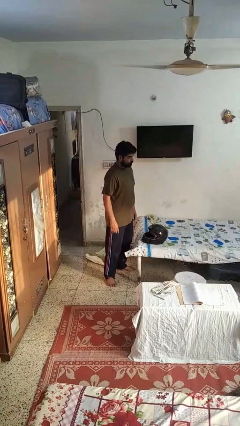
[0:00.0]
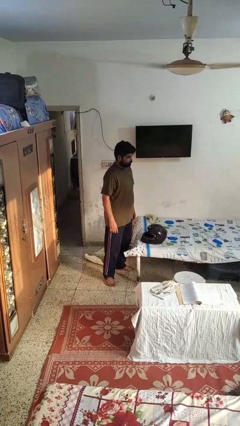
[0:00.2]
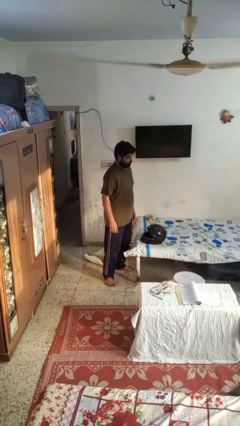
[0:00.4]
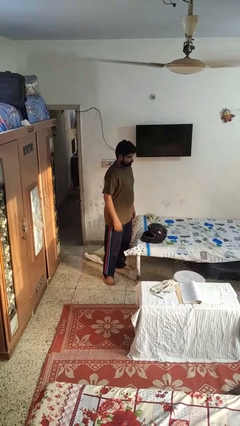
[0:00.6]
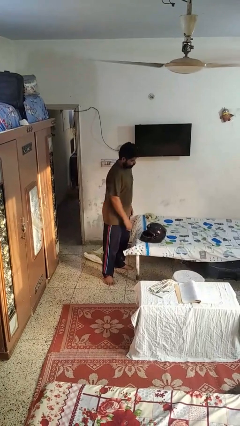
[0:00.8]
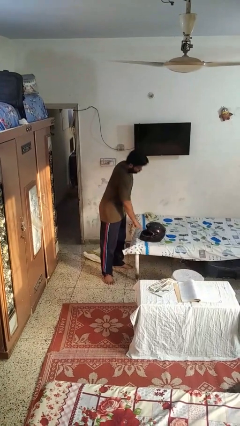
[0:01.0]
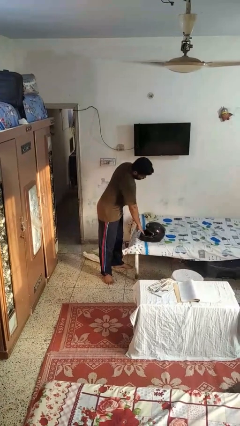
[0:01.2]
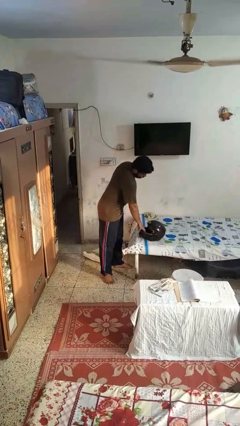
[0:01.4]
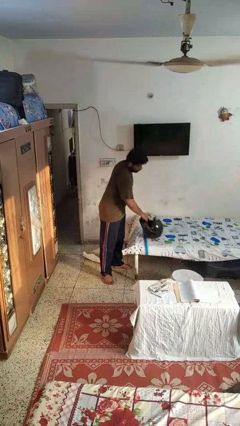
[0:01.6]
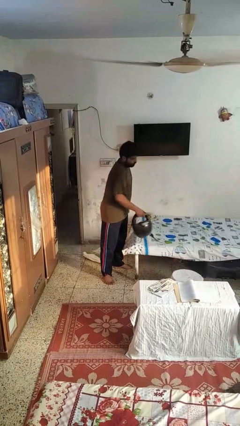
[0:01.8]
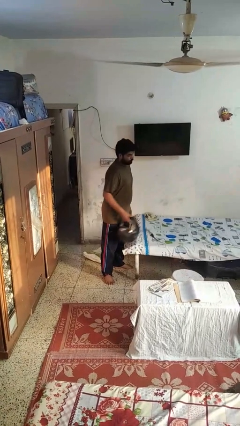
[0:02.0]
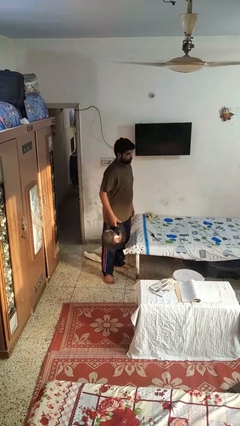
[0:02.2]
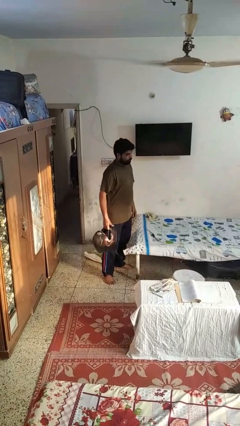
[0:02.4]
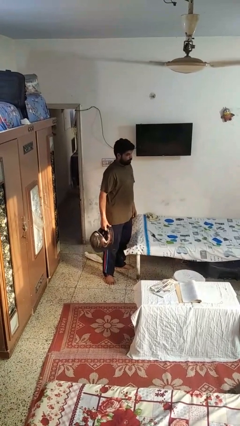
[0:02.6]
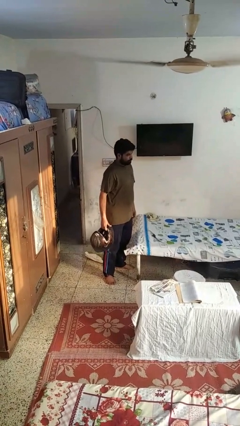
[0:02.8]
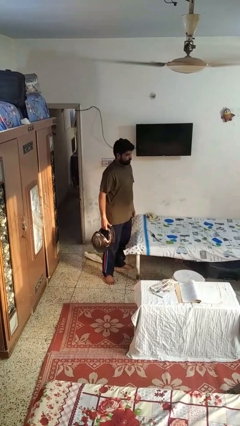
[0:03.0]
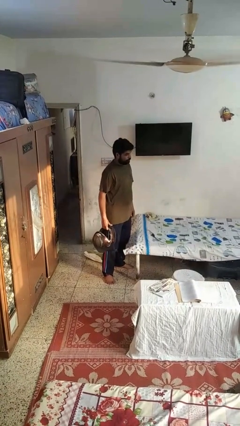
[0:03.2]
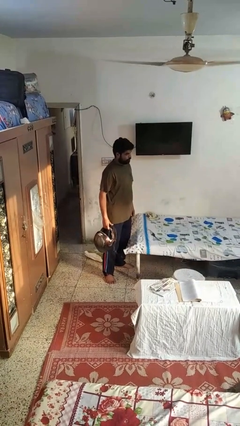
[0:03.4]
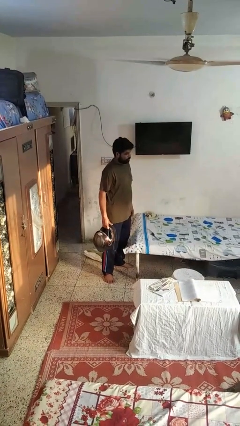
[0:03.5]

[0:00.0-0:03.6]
person picks up object from bed

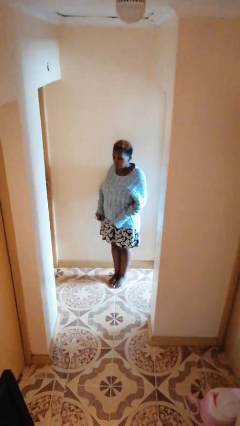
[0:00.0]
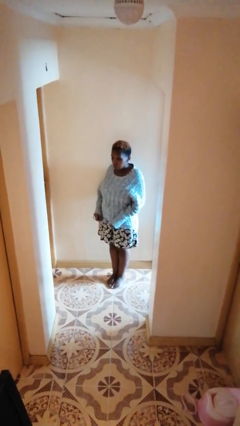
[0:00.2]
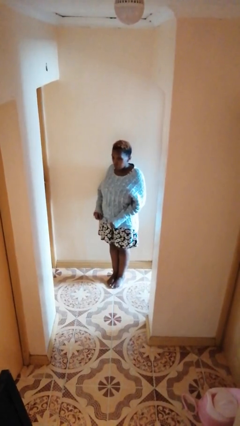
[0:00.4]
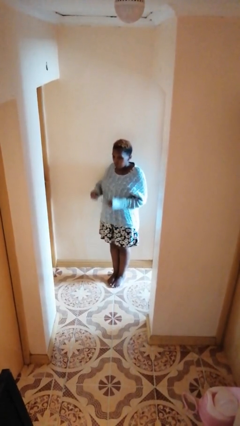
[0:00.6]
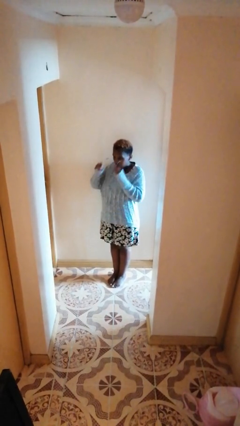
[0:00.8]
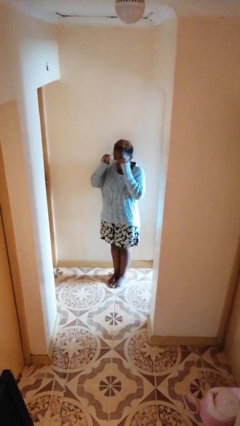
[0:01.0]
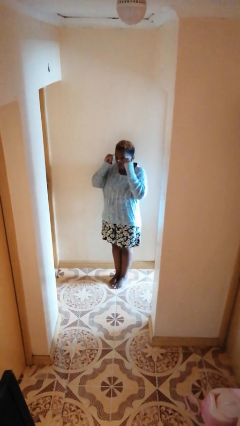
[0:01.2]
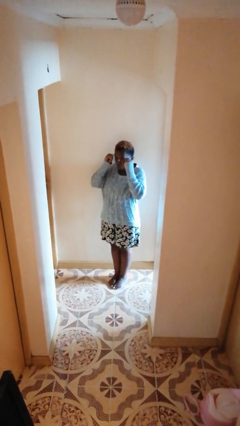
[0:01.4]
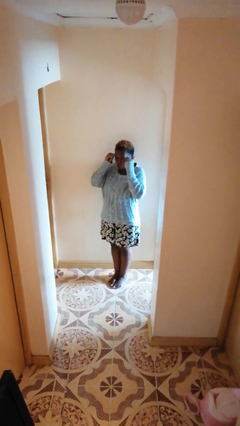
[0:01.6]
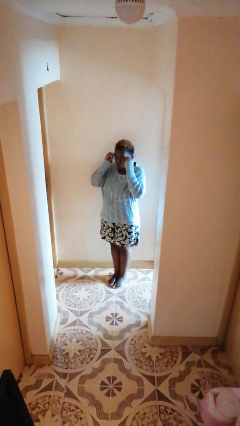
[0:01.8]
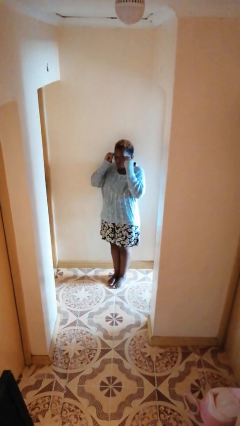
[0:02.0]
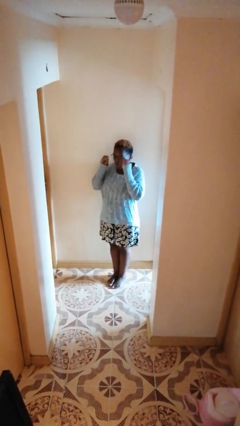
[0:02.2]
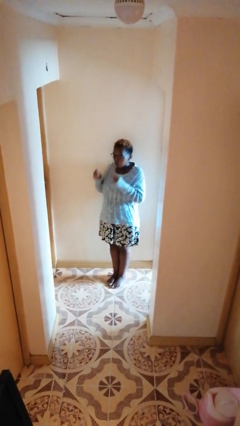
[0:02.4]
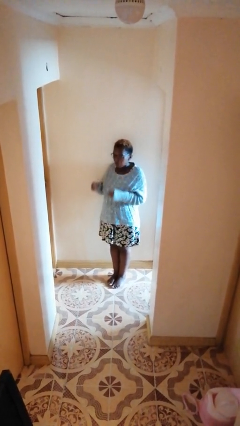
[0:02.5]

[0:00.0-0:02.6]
person puts on glasses

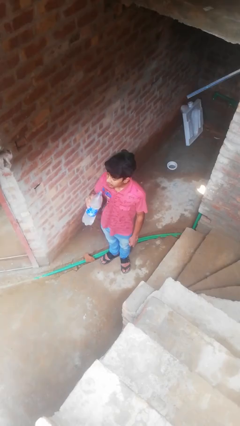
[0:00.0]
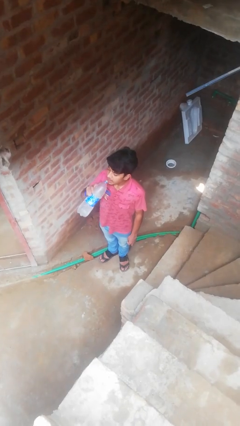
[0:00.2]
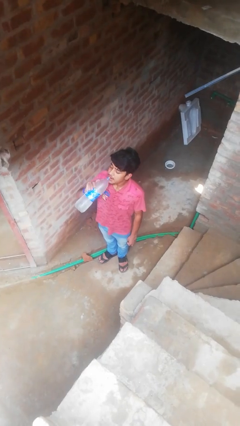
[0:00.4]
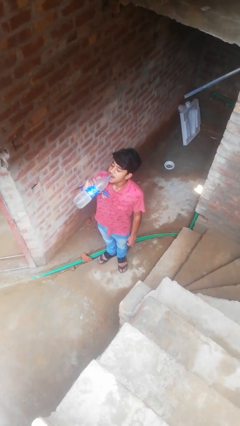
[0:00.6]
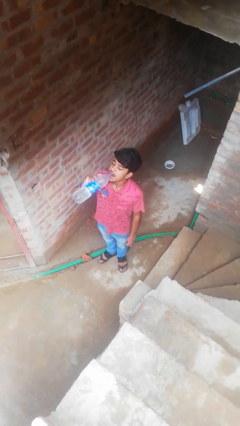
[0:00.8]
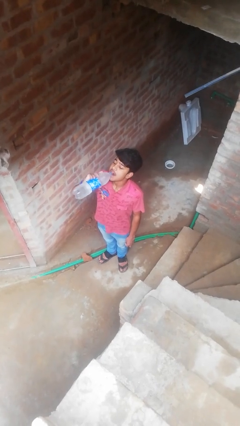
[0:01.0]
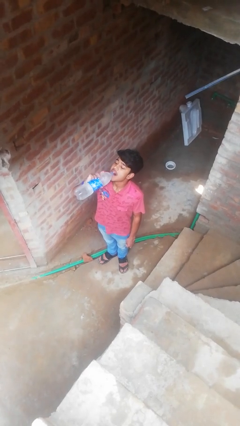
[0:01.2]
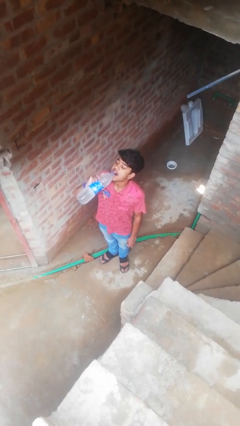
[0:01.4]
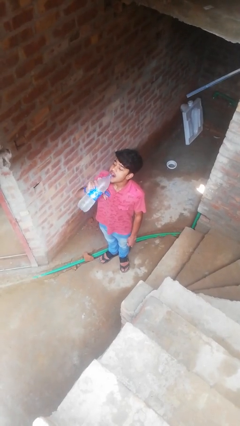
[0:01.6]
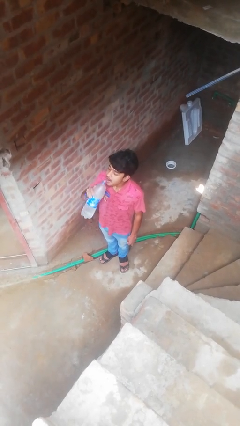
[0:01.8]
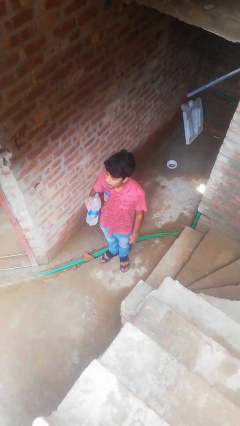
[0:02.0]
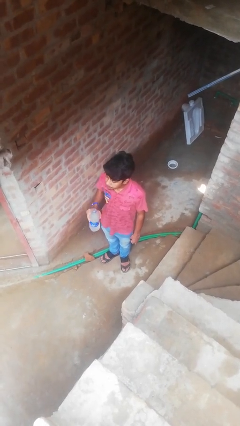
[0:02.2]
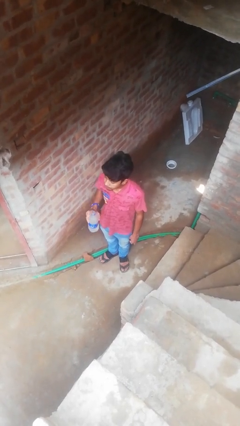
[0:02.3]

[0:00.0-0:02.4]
person drinks from bottle

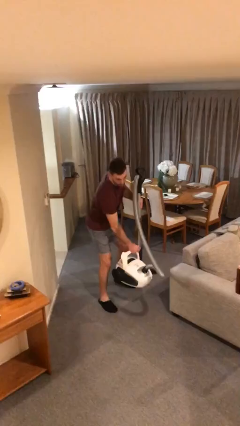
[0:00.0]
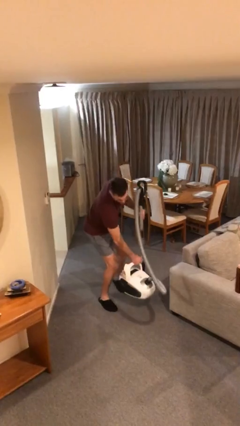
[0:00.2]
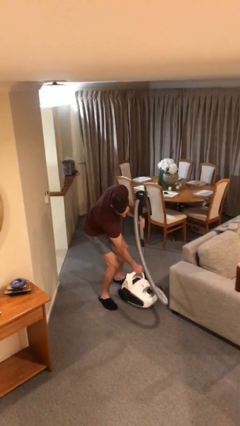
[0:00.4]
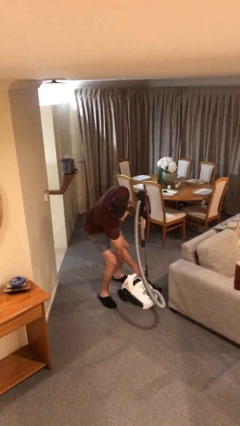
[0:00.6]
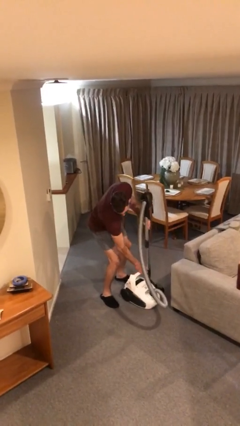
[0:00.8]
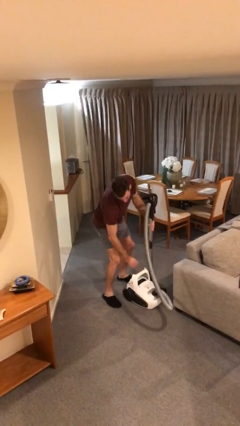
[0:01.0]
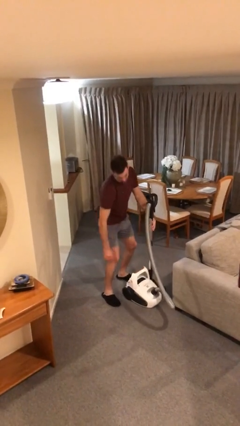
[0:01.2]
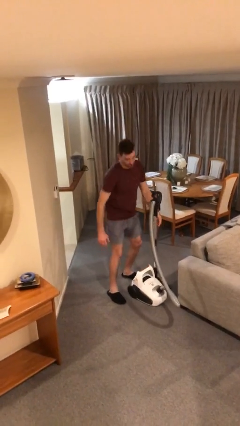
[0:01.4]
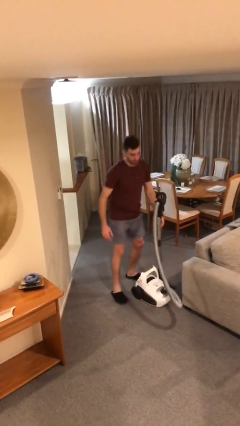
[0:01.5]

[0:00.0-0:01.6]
person puts down object on floor

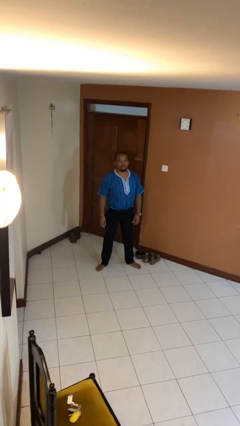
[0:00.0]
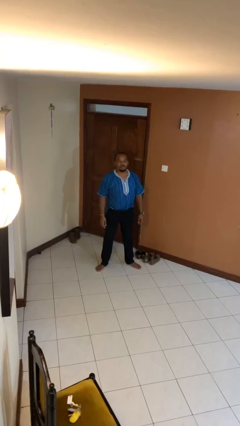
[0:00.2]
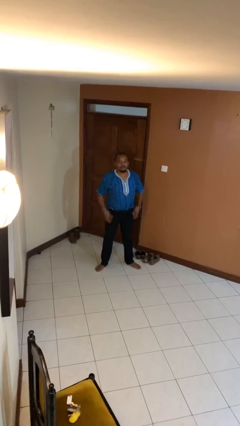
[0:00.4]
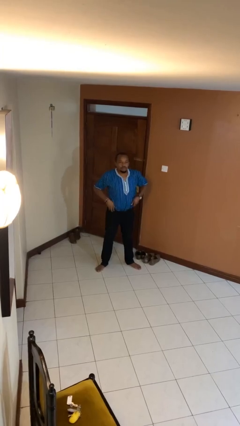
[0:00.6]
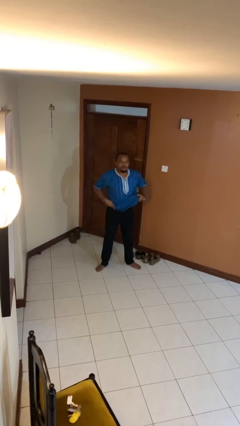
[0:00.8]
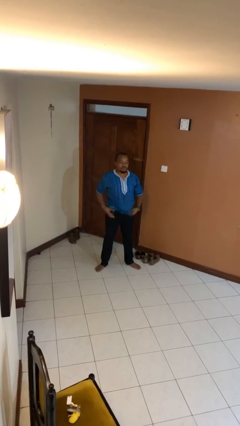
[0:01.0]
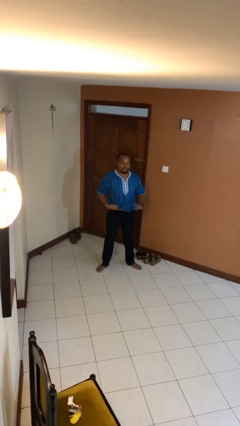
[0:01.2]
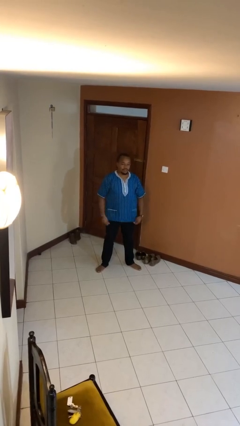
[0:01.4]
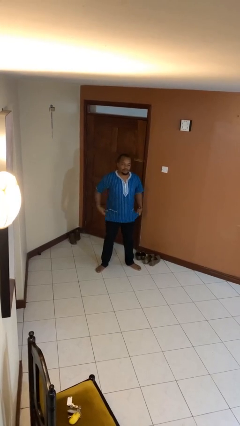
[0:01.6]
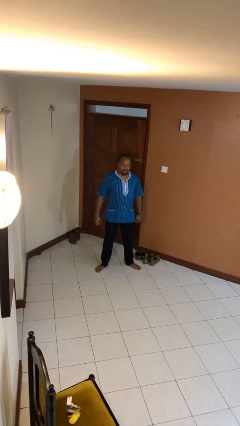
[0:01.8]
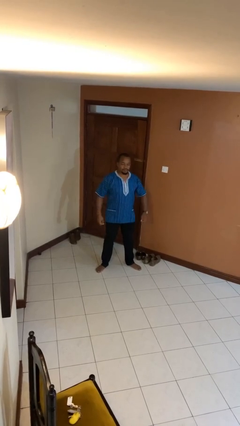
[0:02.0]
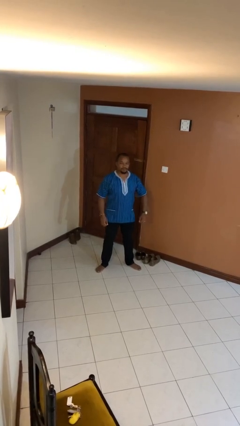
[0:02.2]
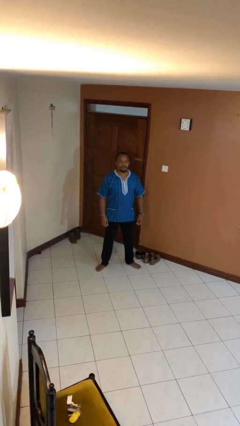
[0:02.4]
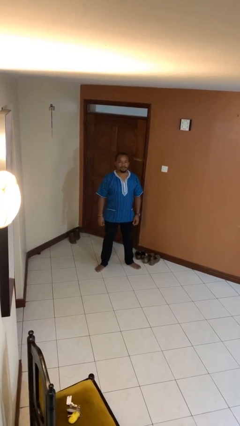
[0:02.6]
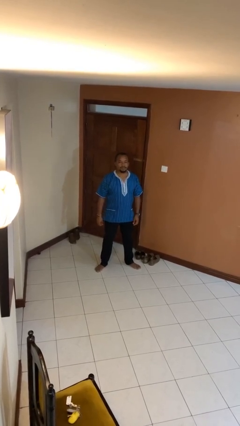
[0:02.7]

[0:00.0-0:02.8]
person untucks shirt

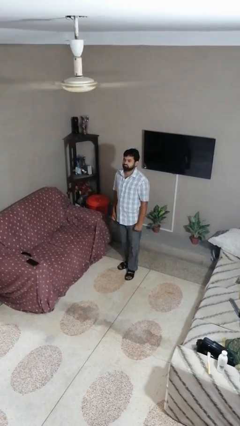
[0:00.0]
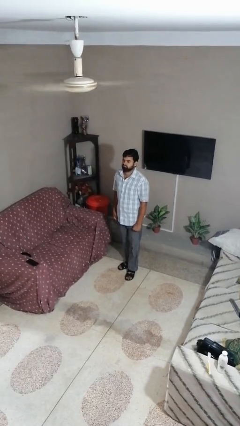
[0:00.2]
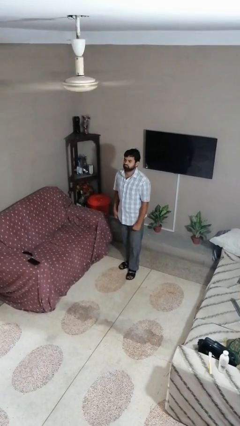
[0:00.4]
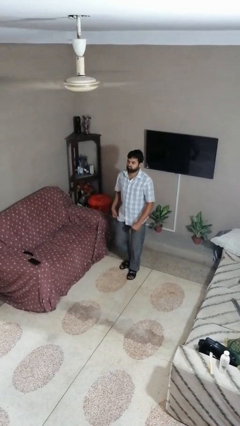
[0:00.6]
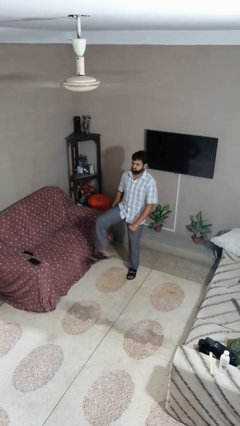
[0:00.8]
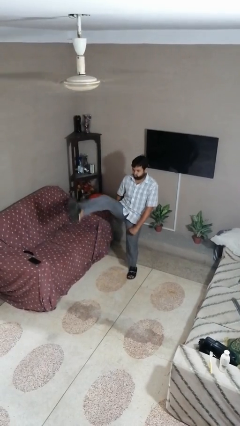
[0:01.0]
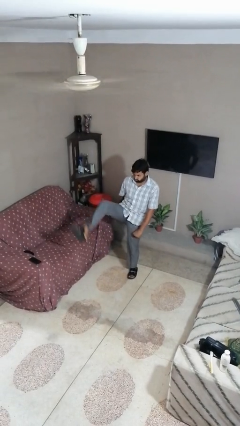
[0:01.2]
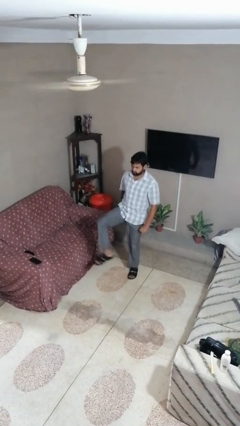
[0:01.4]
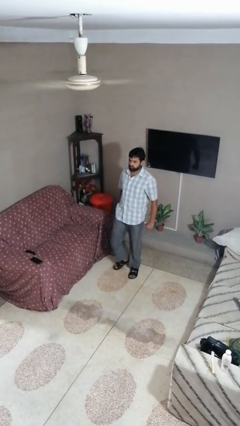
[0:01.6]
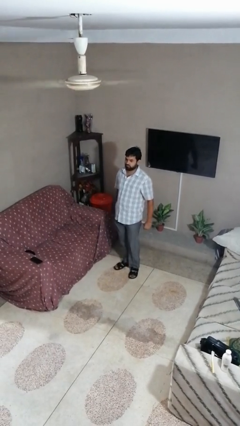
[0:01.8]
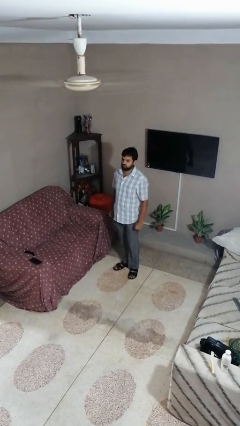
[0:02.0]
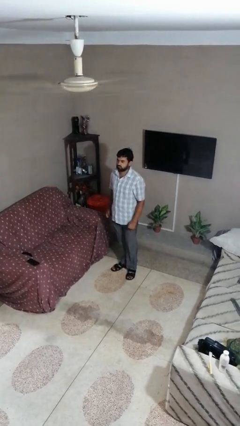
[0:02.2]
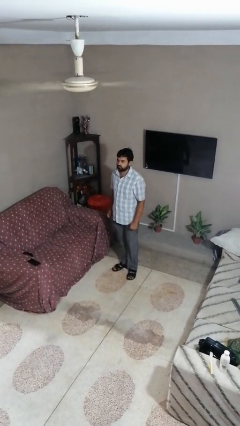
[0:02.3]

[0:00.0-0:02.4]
person karate kicks

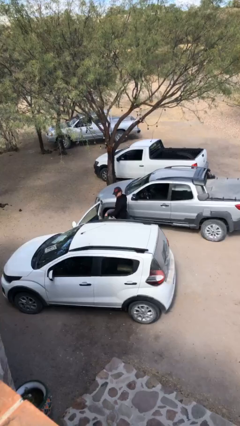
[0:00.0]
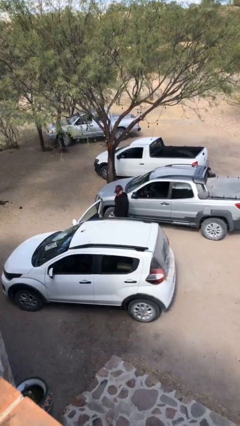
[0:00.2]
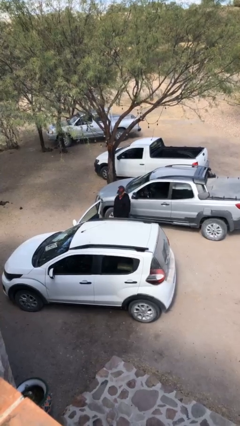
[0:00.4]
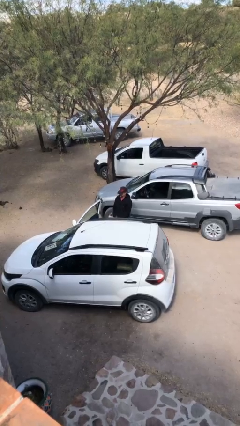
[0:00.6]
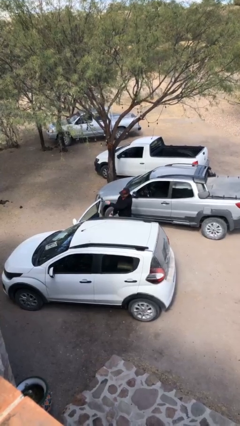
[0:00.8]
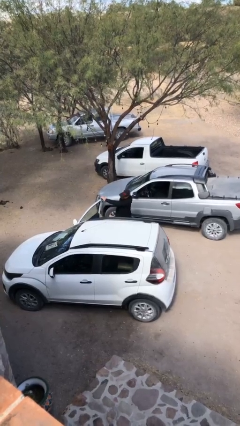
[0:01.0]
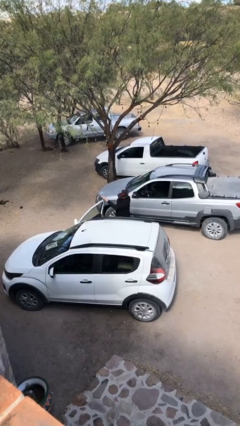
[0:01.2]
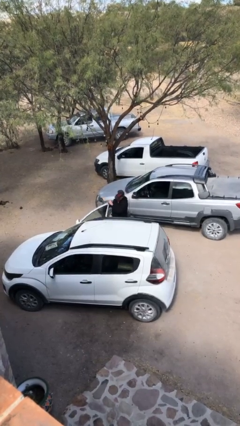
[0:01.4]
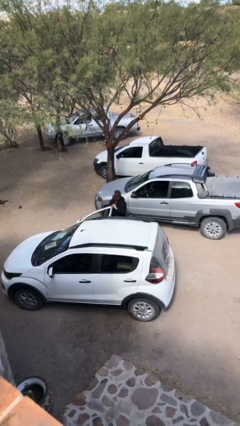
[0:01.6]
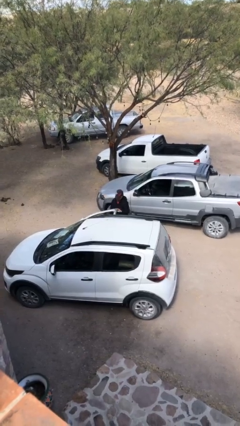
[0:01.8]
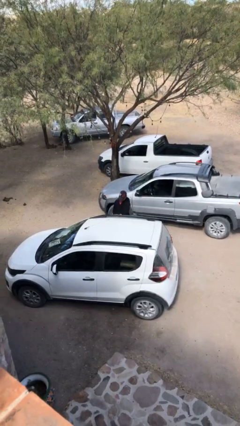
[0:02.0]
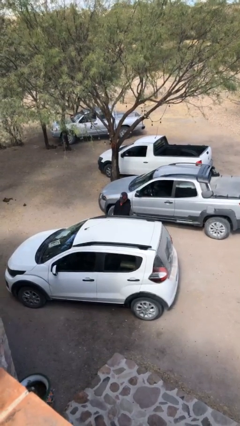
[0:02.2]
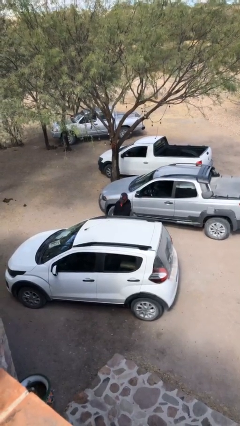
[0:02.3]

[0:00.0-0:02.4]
person closes car door
